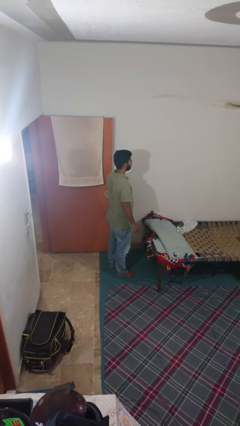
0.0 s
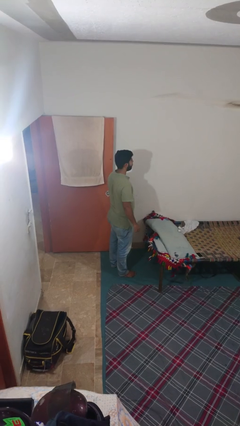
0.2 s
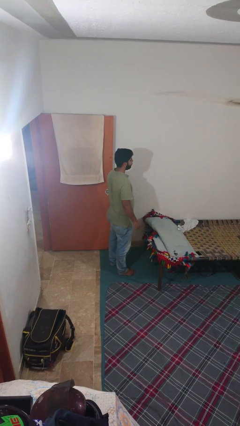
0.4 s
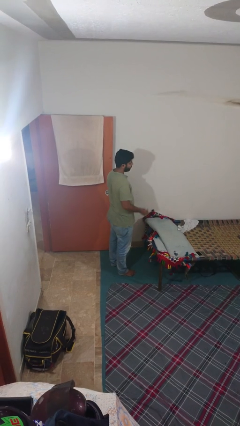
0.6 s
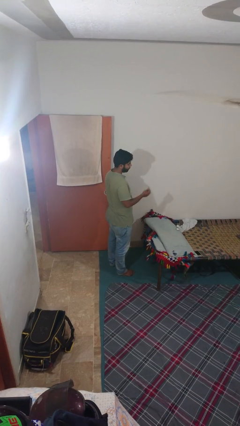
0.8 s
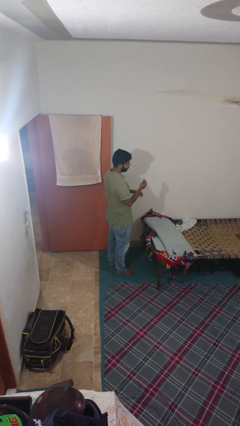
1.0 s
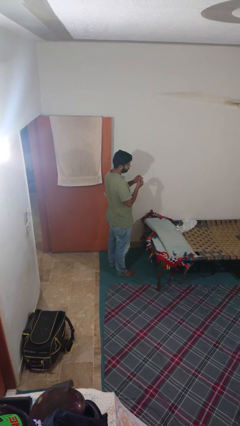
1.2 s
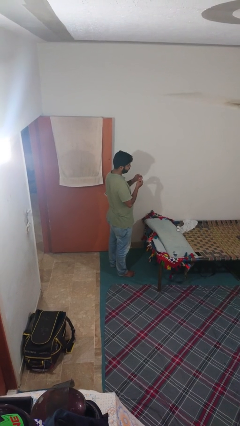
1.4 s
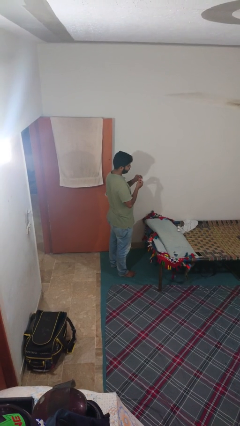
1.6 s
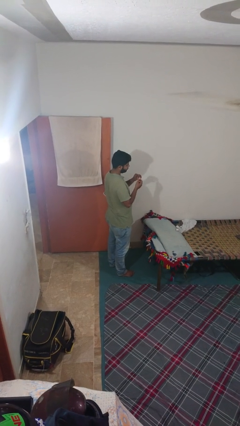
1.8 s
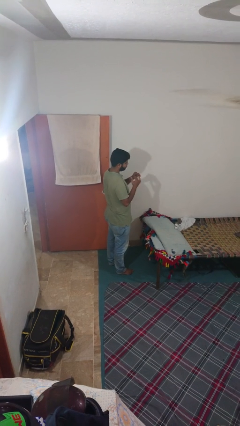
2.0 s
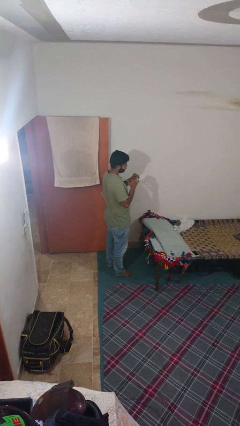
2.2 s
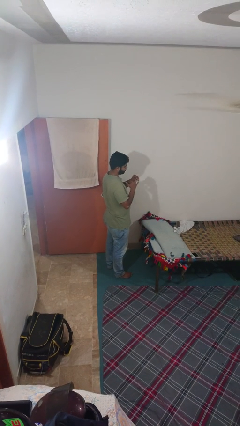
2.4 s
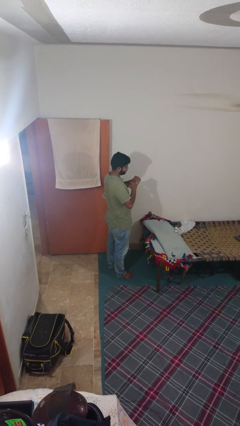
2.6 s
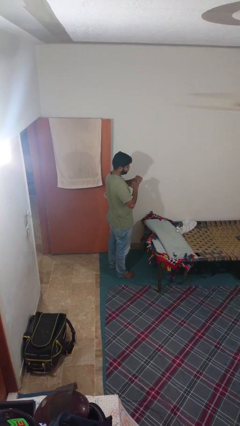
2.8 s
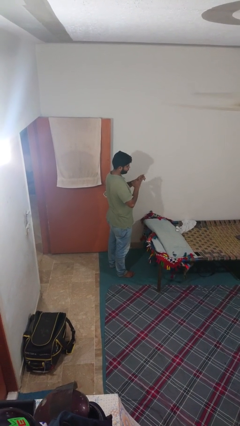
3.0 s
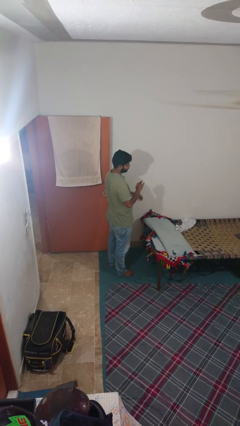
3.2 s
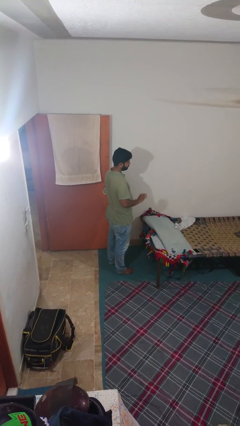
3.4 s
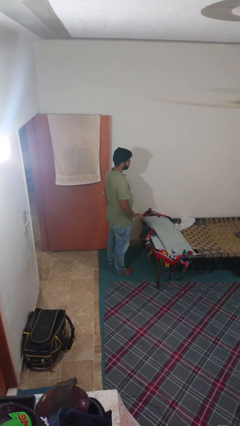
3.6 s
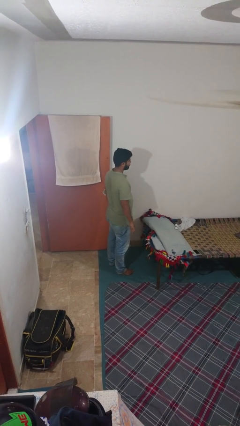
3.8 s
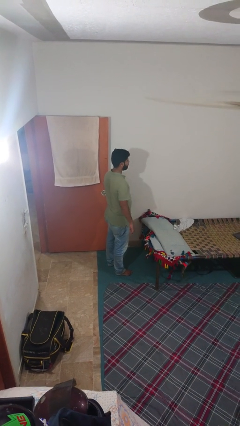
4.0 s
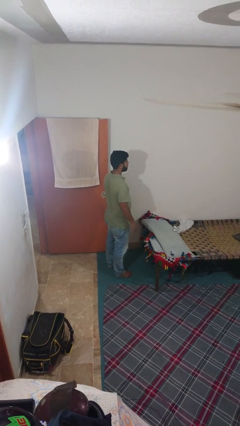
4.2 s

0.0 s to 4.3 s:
person puts on ring

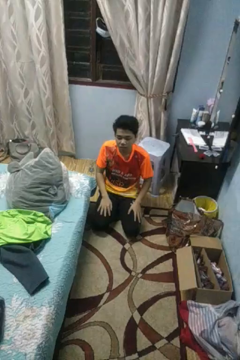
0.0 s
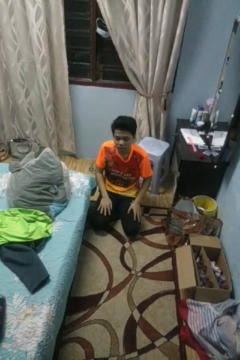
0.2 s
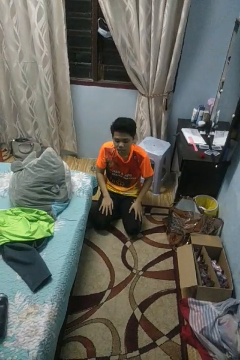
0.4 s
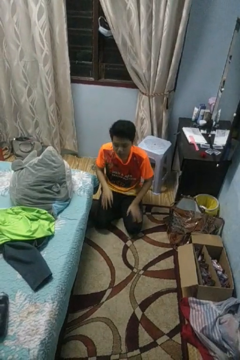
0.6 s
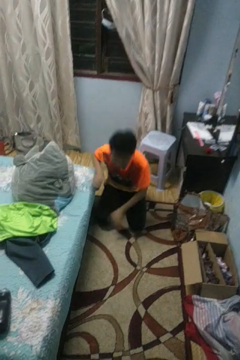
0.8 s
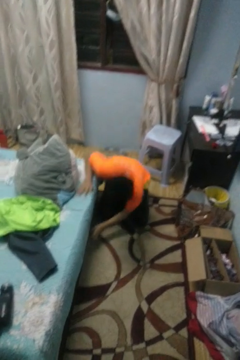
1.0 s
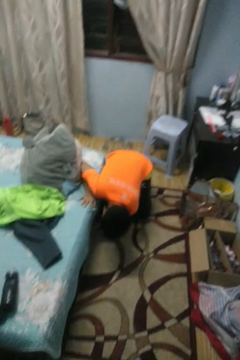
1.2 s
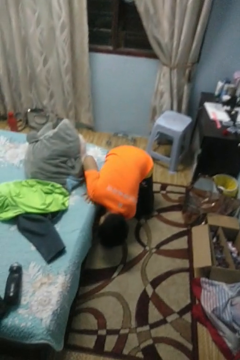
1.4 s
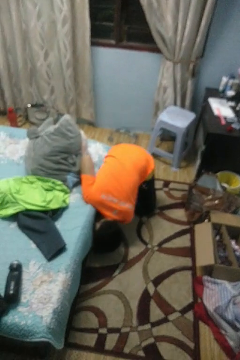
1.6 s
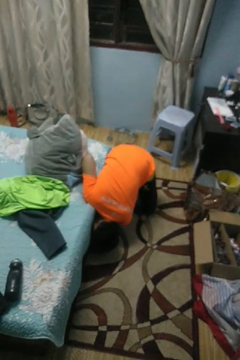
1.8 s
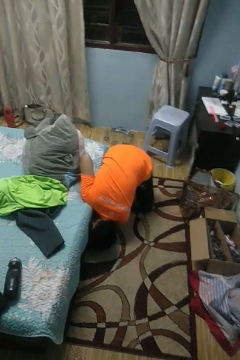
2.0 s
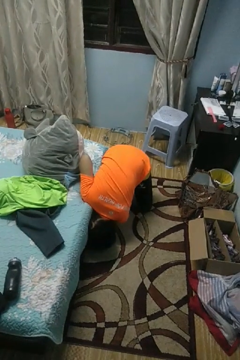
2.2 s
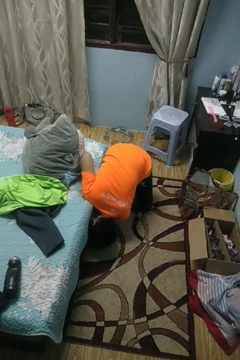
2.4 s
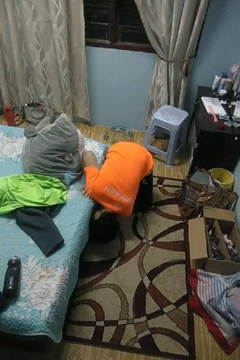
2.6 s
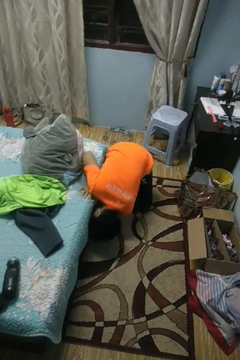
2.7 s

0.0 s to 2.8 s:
person searches under bed

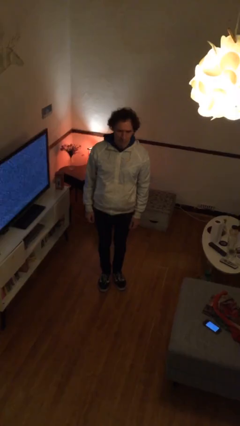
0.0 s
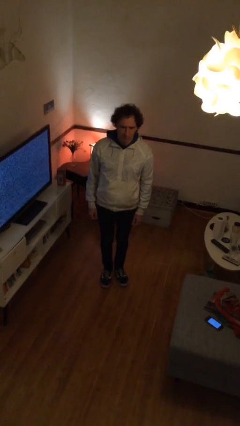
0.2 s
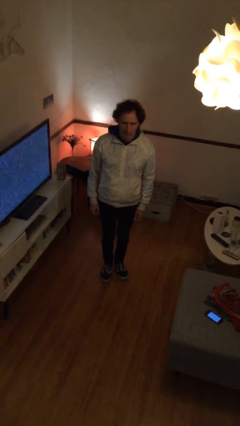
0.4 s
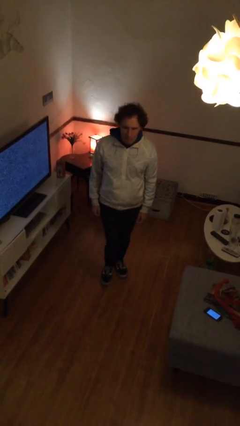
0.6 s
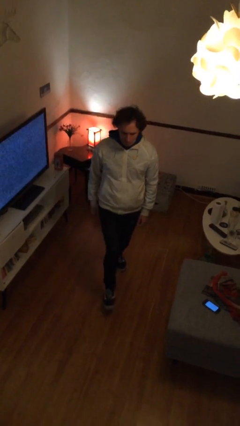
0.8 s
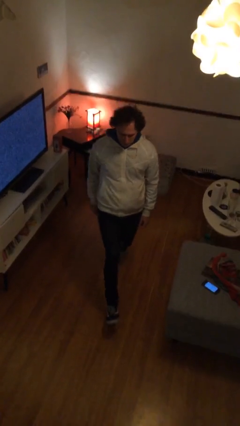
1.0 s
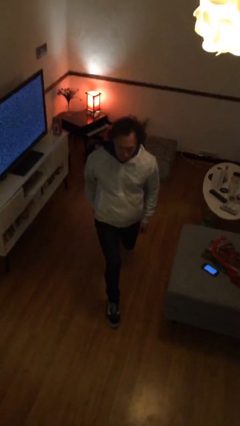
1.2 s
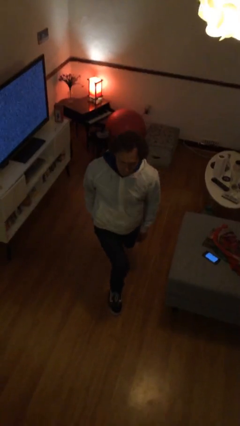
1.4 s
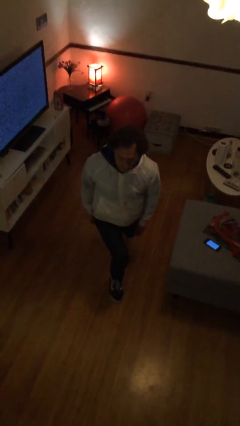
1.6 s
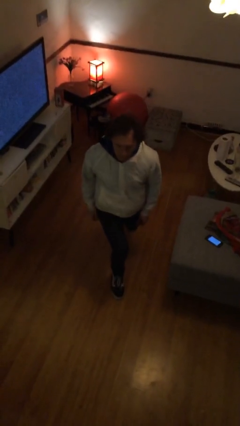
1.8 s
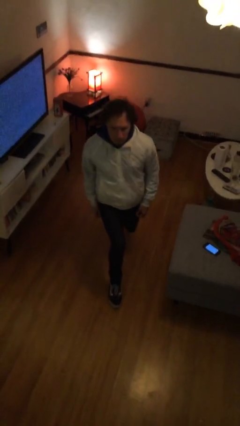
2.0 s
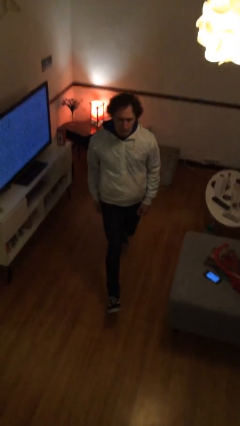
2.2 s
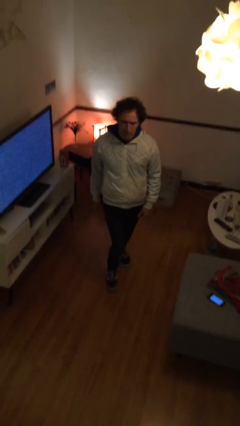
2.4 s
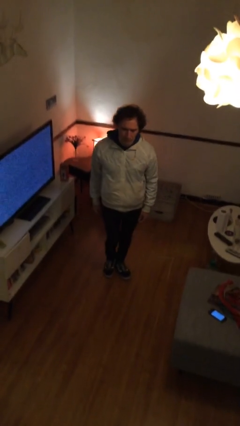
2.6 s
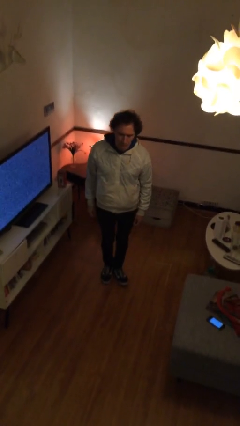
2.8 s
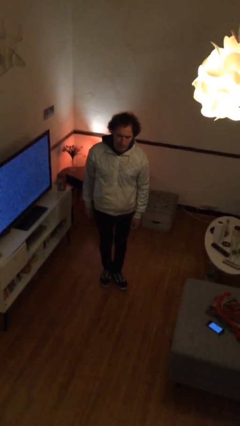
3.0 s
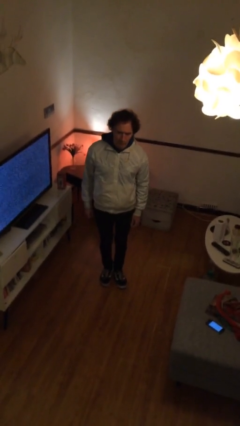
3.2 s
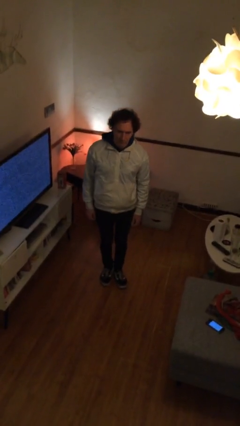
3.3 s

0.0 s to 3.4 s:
person exercises with lunges

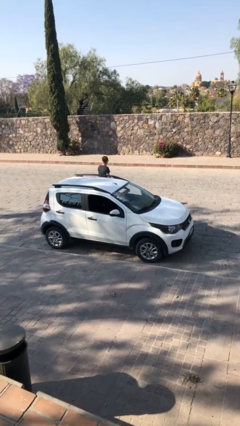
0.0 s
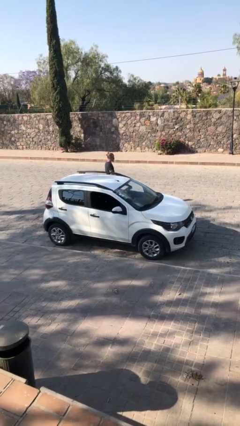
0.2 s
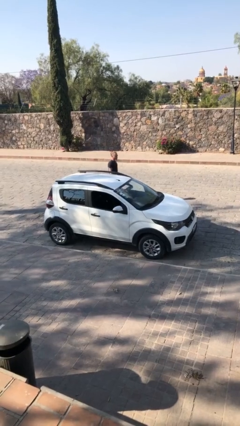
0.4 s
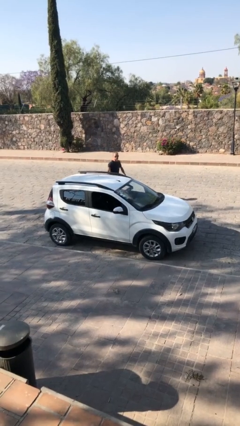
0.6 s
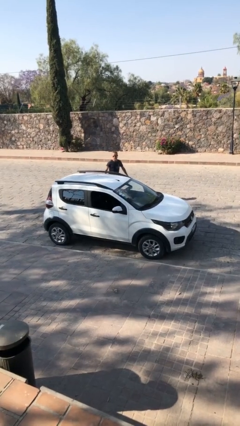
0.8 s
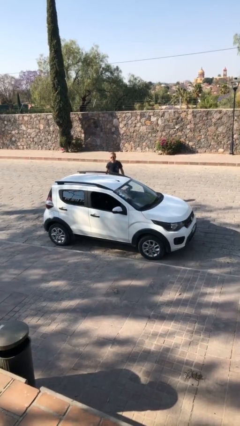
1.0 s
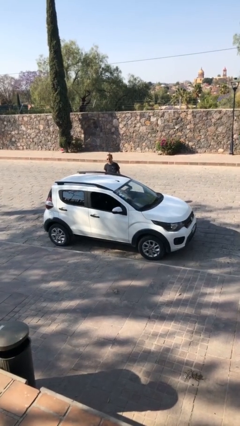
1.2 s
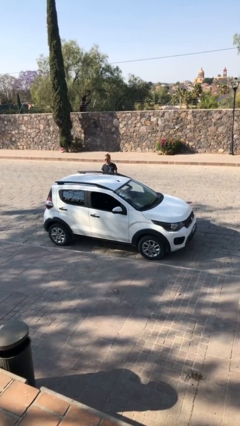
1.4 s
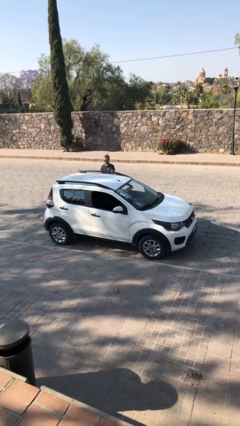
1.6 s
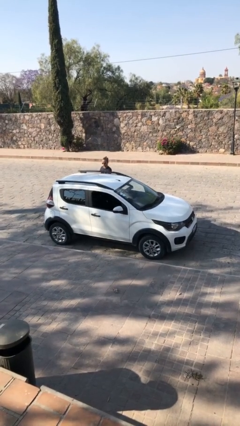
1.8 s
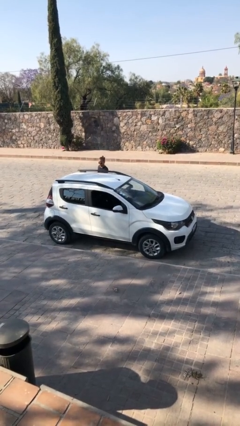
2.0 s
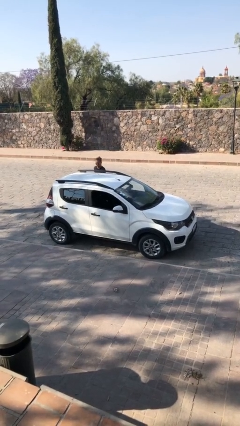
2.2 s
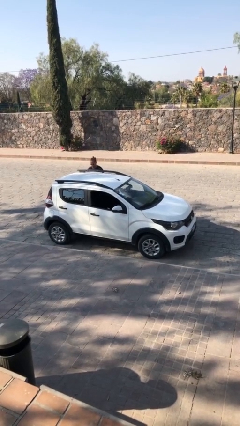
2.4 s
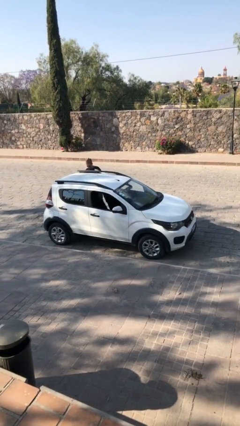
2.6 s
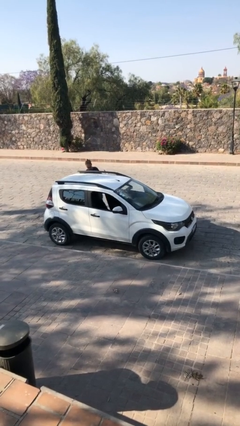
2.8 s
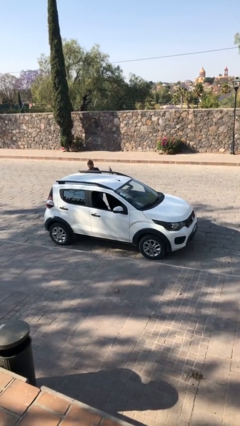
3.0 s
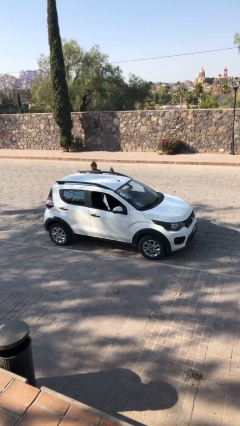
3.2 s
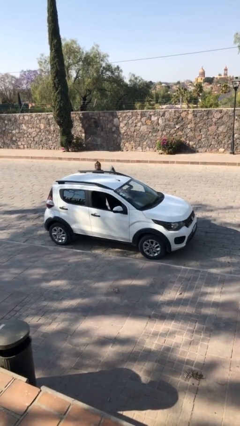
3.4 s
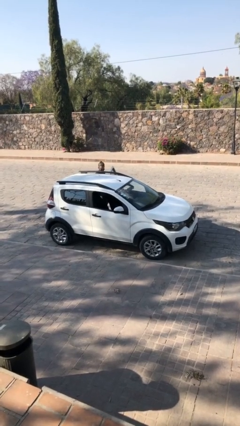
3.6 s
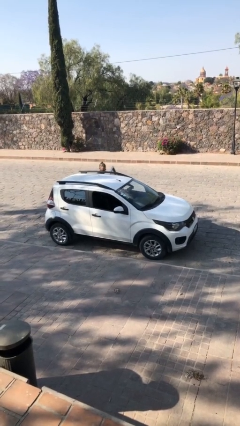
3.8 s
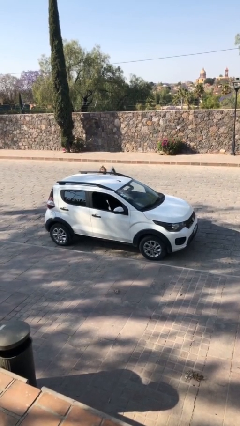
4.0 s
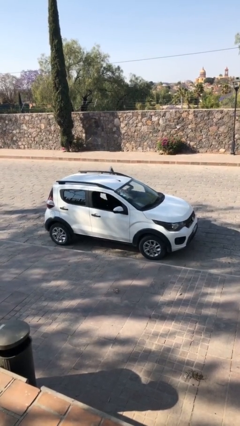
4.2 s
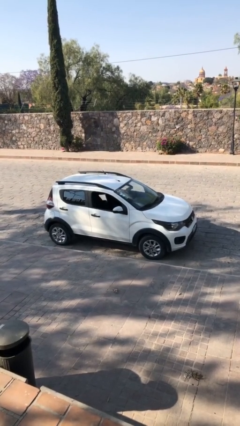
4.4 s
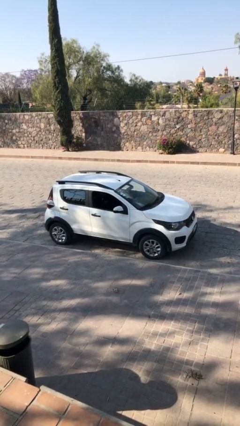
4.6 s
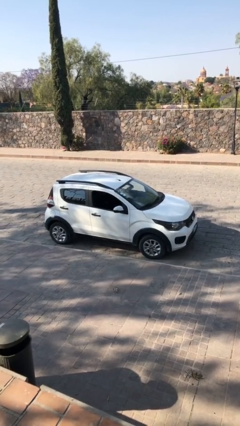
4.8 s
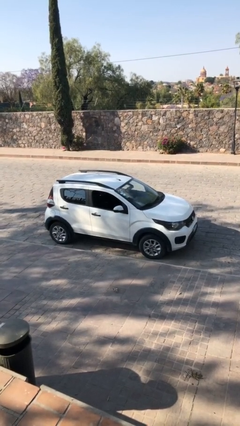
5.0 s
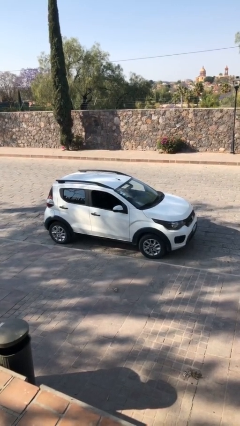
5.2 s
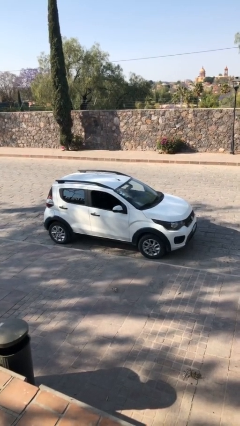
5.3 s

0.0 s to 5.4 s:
car picks up person

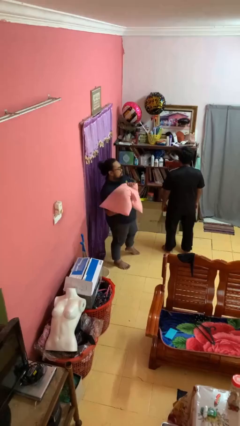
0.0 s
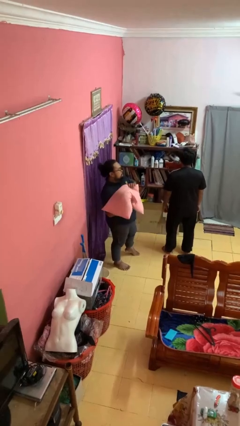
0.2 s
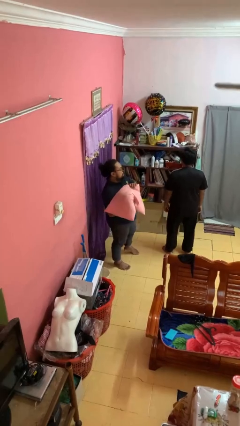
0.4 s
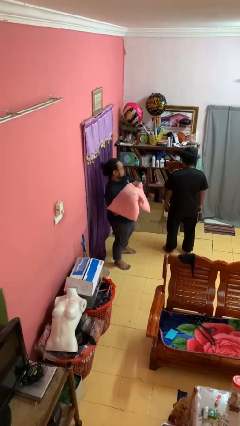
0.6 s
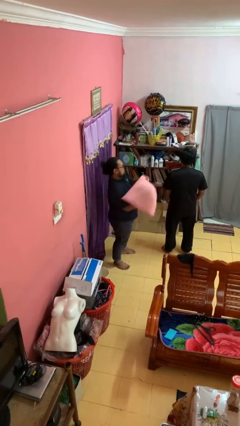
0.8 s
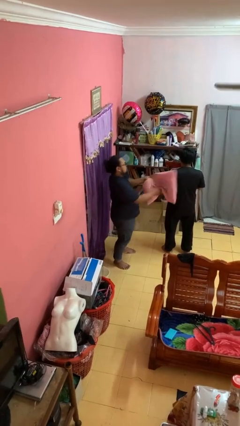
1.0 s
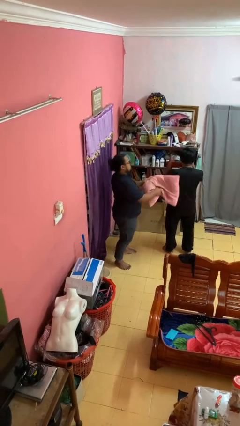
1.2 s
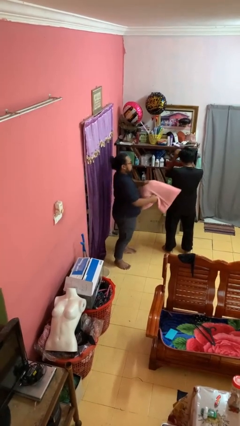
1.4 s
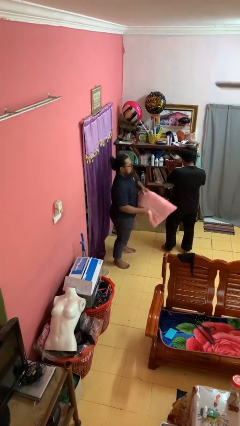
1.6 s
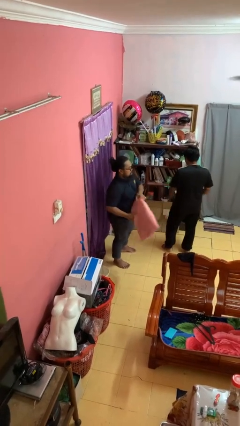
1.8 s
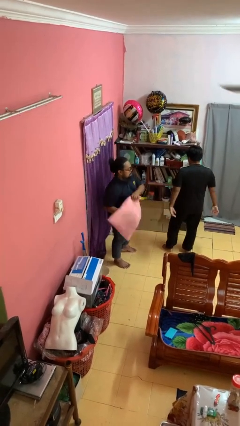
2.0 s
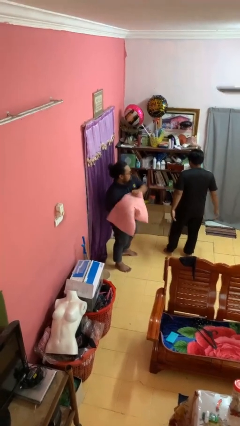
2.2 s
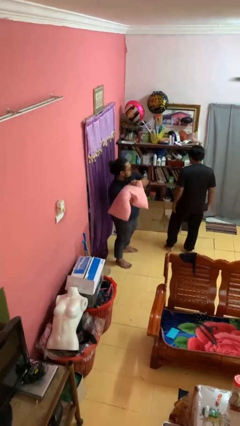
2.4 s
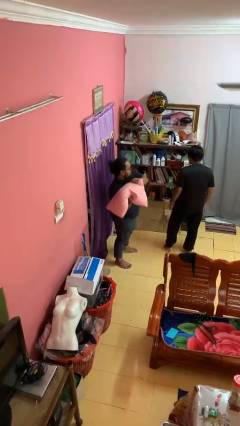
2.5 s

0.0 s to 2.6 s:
person hits person with pillow
